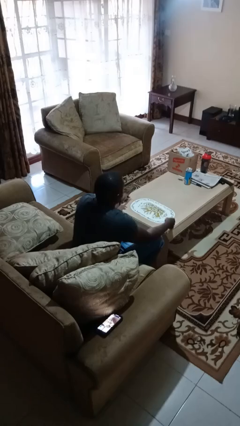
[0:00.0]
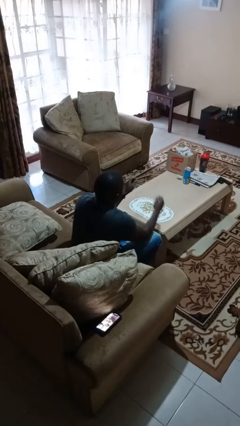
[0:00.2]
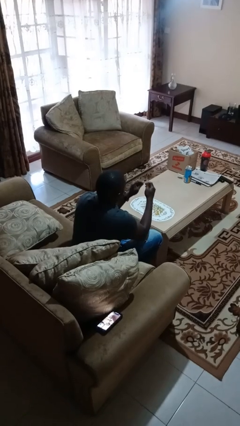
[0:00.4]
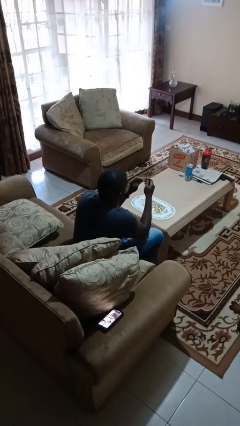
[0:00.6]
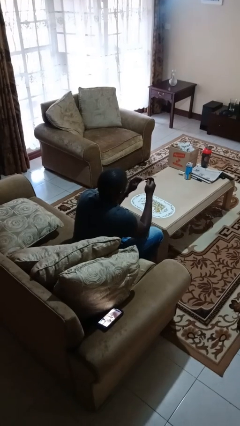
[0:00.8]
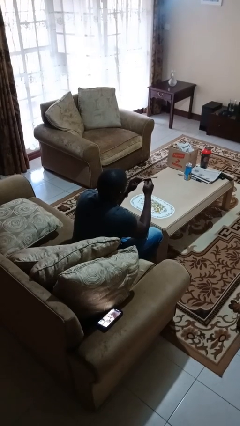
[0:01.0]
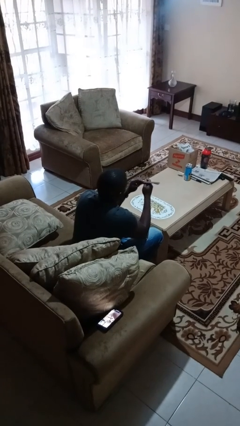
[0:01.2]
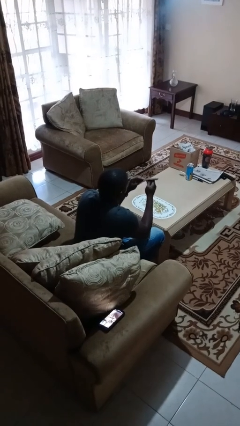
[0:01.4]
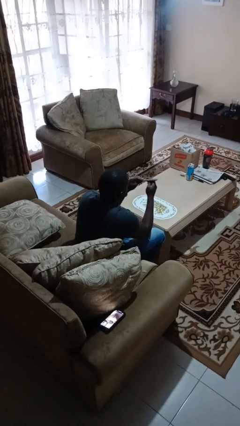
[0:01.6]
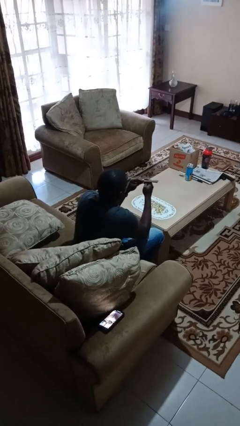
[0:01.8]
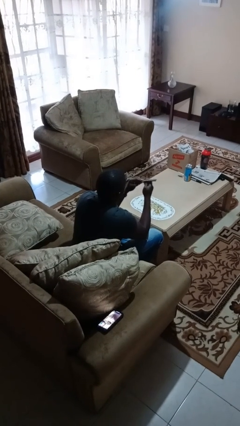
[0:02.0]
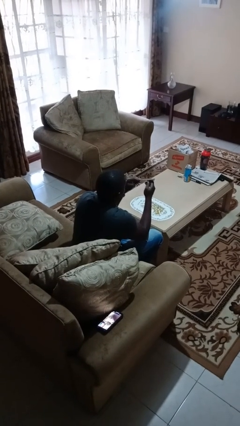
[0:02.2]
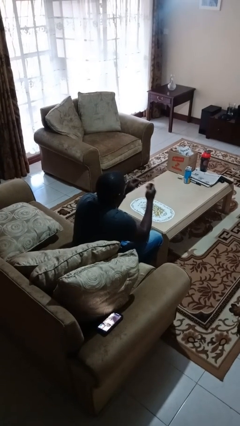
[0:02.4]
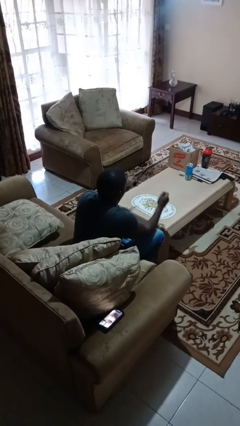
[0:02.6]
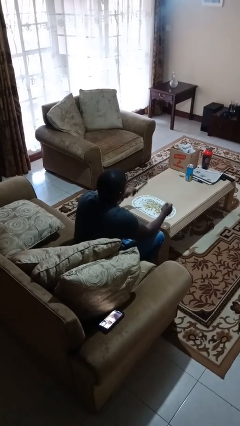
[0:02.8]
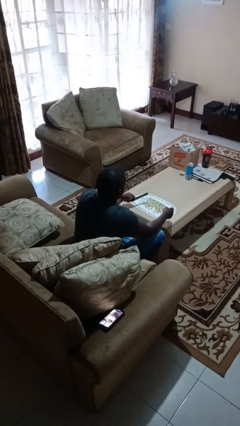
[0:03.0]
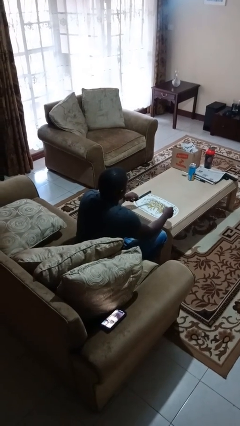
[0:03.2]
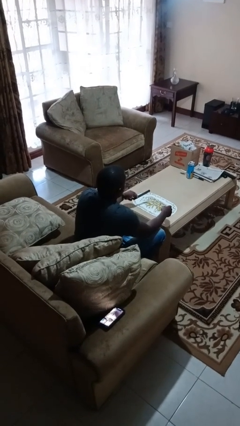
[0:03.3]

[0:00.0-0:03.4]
person files fingernails

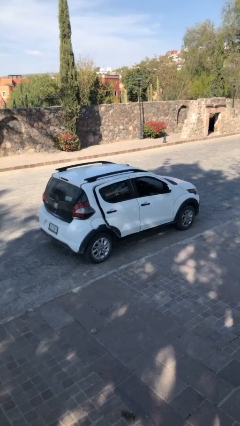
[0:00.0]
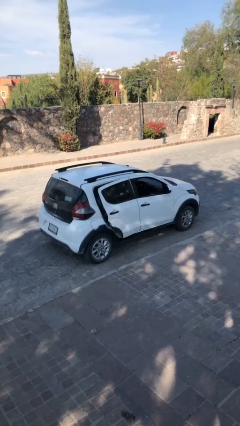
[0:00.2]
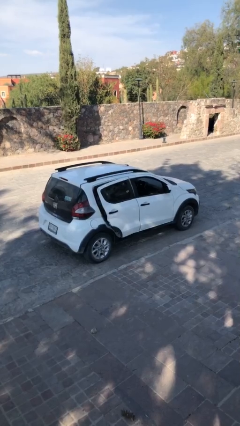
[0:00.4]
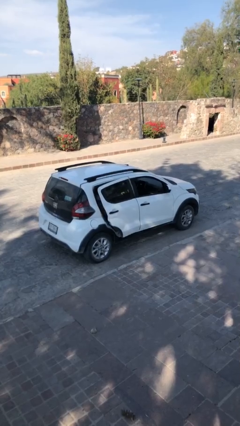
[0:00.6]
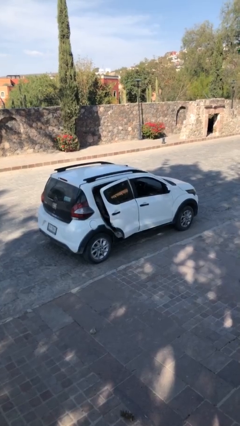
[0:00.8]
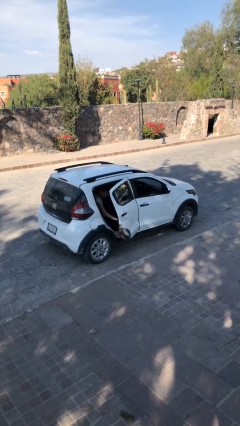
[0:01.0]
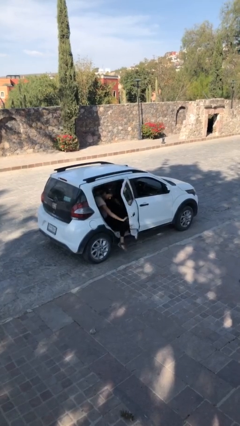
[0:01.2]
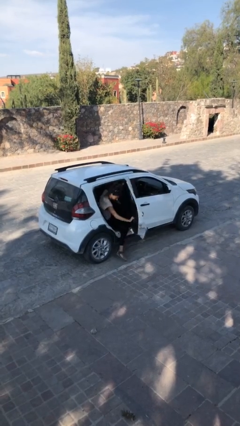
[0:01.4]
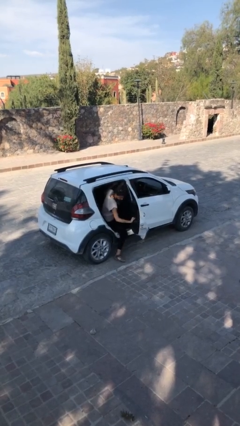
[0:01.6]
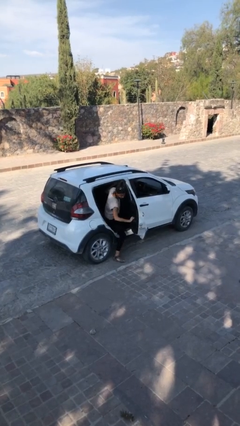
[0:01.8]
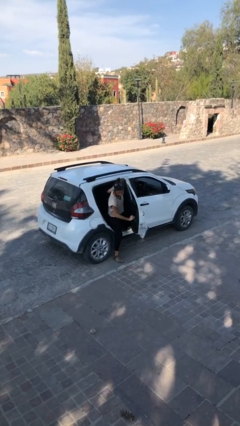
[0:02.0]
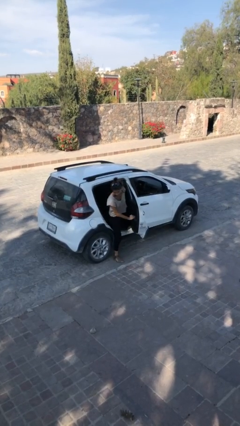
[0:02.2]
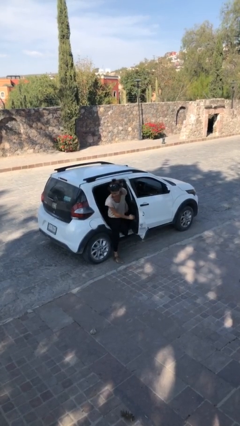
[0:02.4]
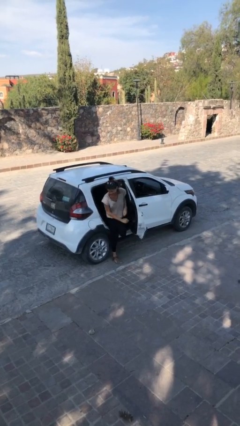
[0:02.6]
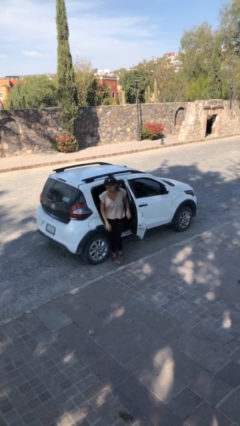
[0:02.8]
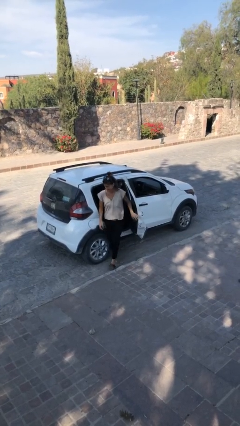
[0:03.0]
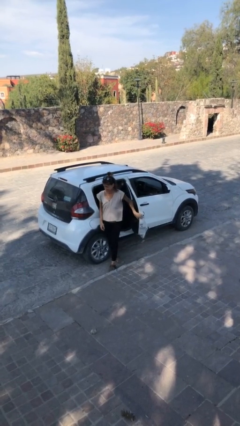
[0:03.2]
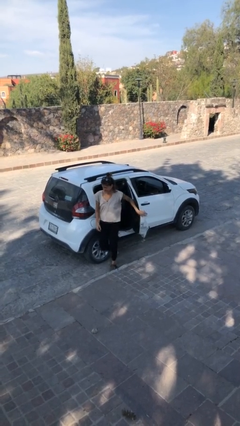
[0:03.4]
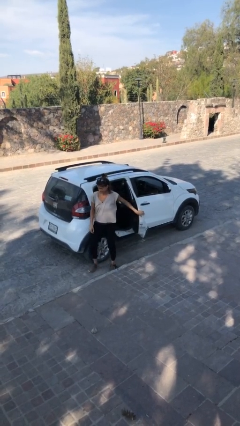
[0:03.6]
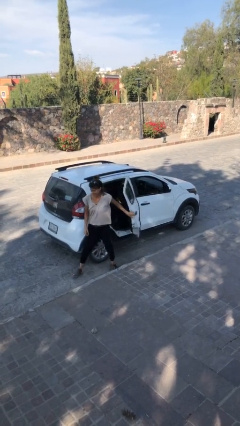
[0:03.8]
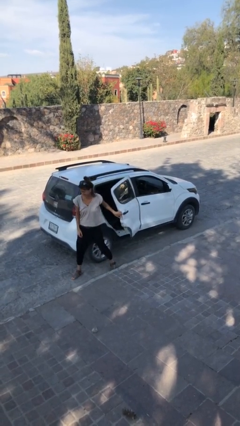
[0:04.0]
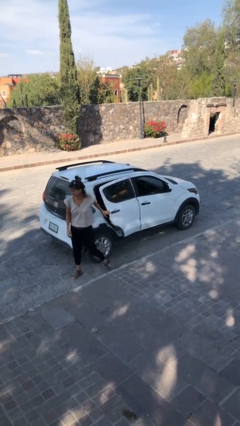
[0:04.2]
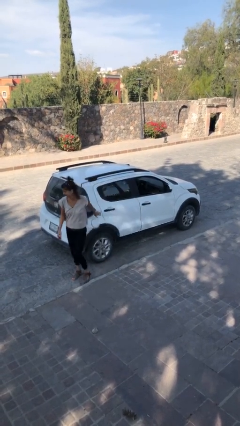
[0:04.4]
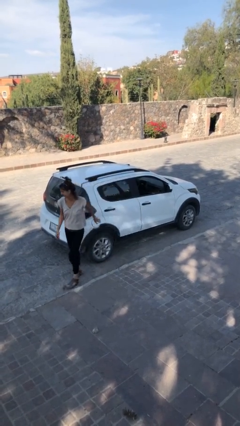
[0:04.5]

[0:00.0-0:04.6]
car drops off person

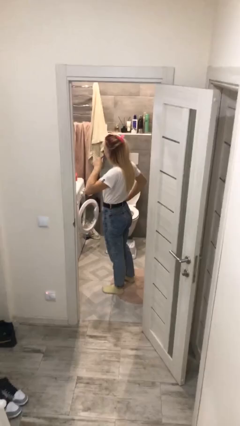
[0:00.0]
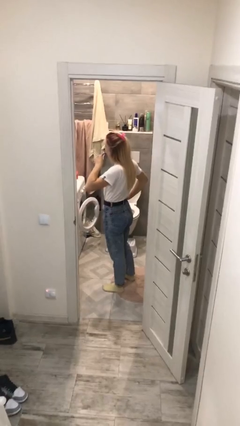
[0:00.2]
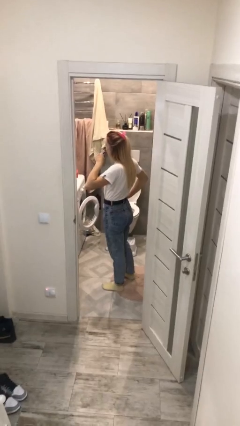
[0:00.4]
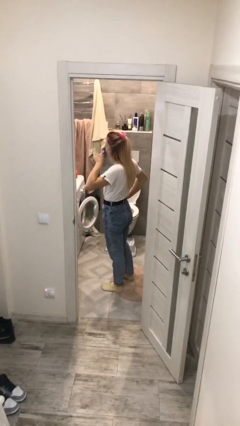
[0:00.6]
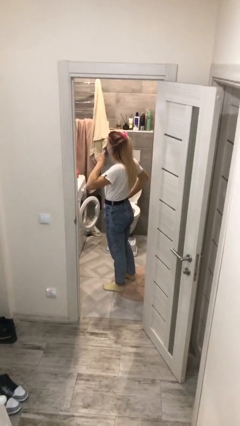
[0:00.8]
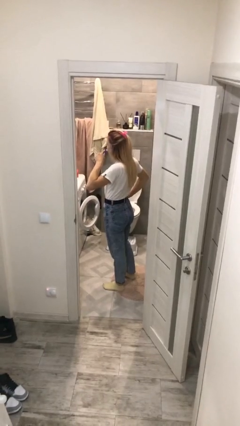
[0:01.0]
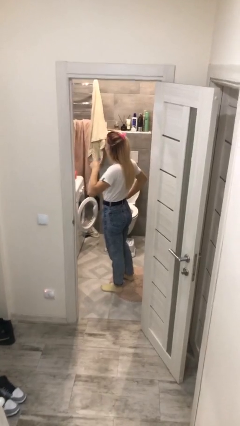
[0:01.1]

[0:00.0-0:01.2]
person brushes teeth

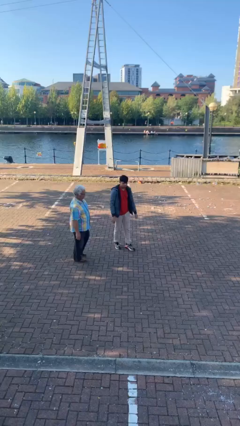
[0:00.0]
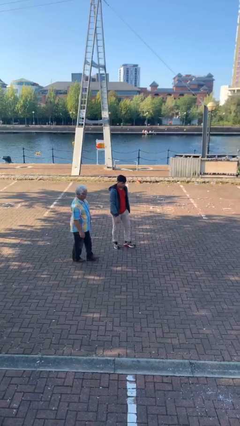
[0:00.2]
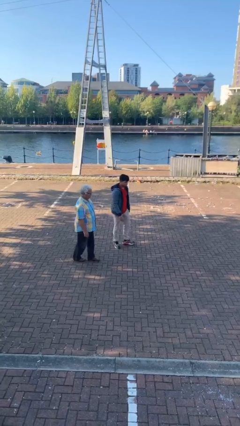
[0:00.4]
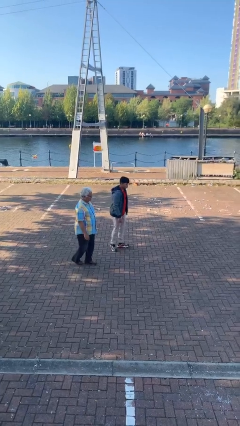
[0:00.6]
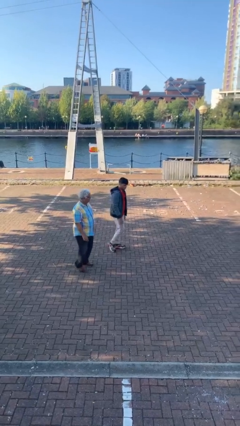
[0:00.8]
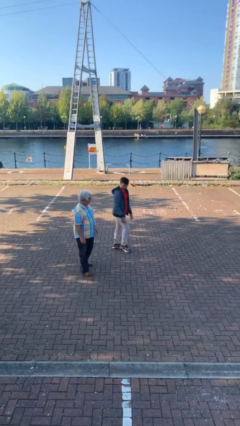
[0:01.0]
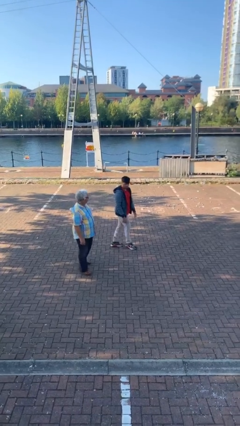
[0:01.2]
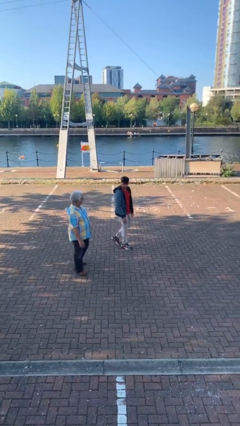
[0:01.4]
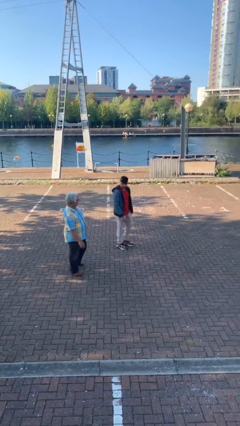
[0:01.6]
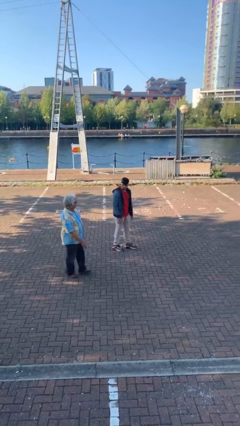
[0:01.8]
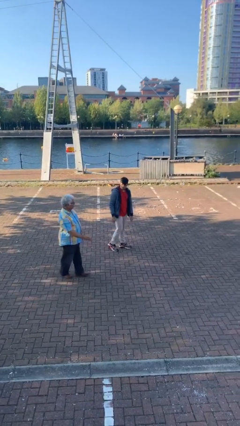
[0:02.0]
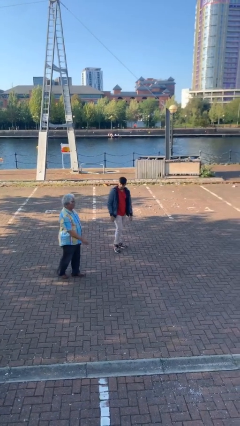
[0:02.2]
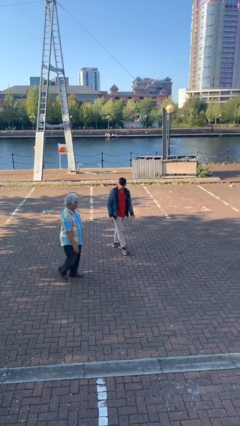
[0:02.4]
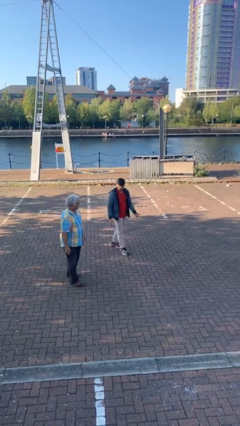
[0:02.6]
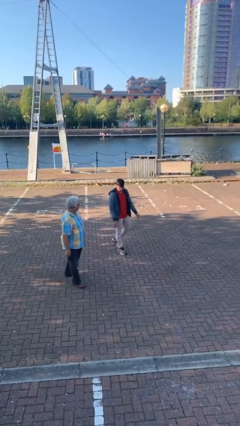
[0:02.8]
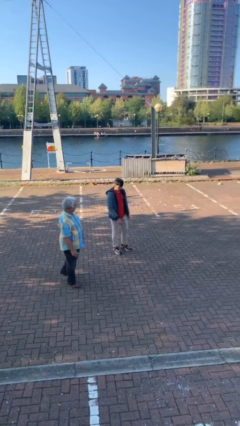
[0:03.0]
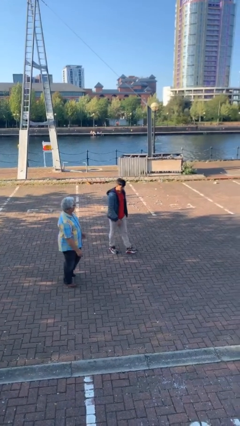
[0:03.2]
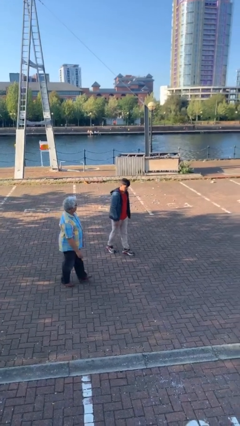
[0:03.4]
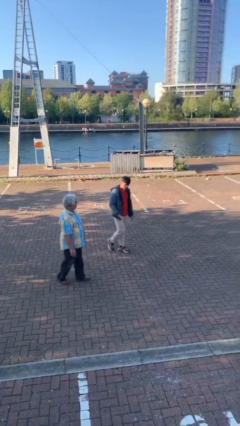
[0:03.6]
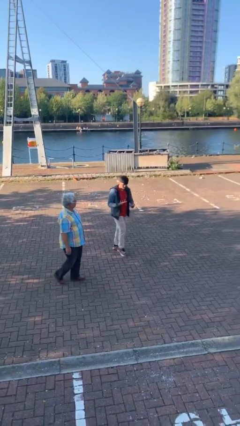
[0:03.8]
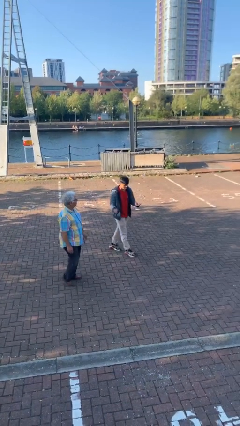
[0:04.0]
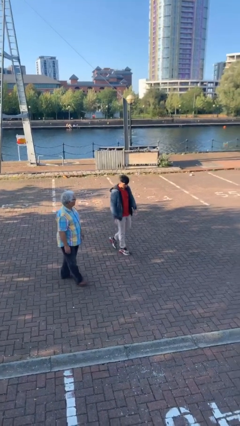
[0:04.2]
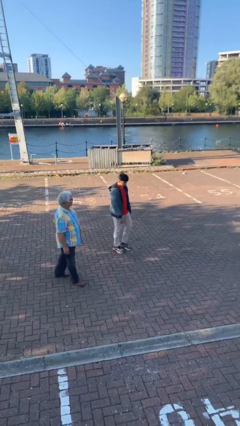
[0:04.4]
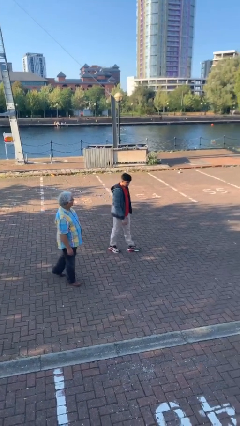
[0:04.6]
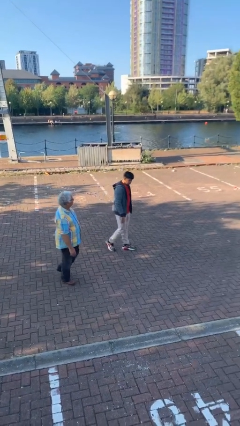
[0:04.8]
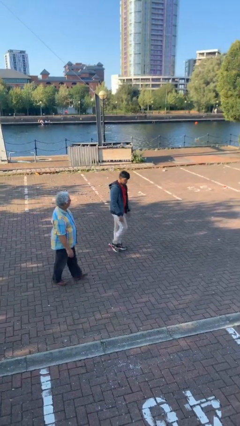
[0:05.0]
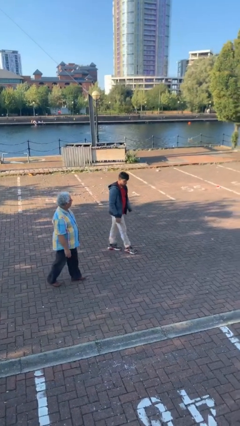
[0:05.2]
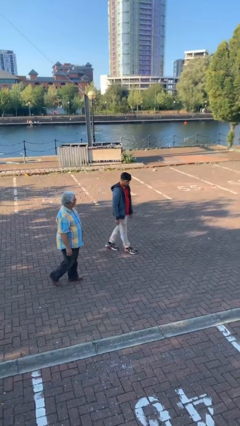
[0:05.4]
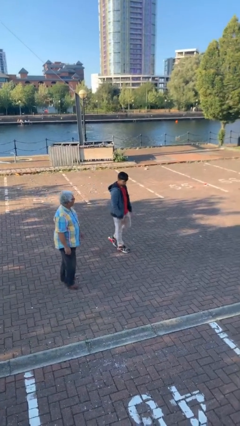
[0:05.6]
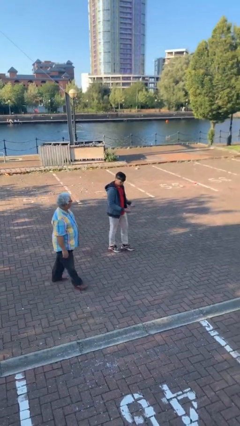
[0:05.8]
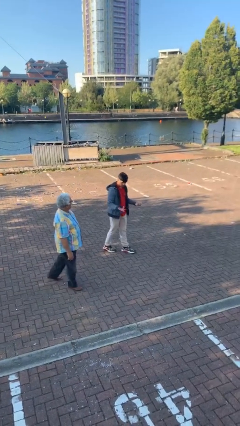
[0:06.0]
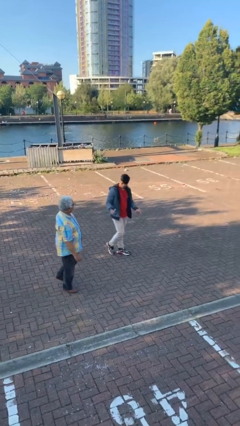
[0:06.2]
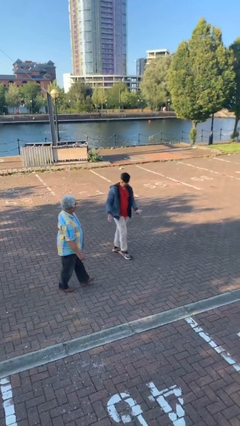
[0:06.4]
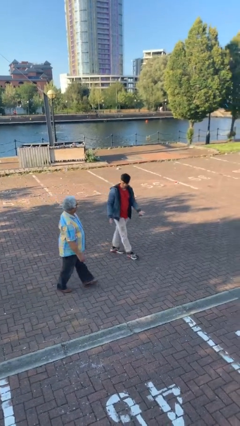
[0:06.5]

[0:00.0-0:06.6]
person talks to person

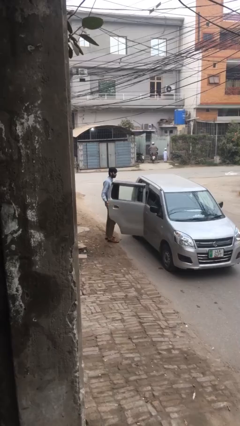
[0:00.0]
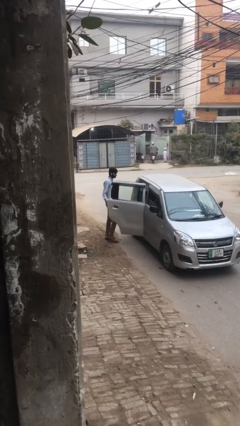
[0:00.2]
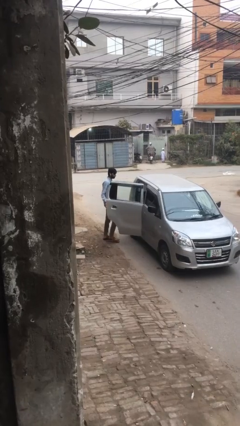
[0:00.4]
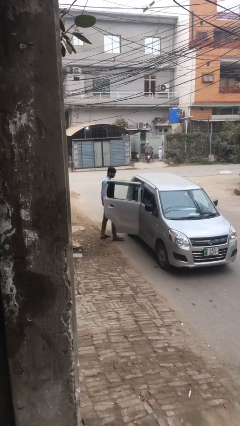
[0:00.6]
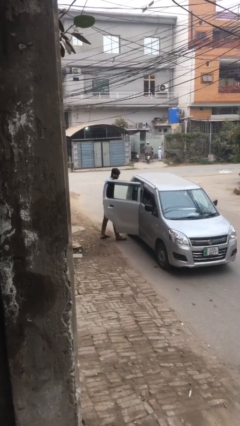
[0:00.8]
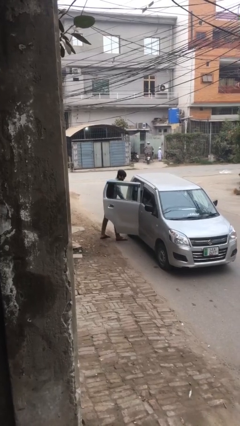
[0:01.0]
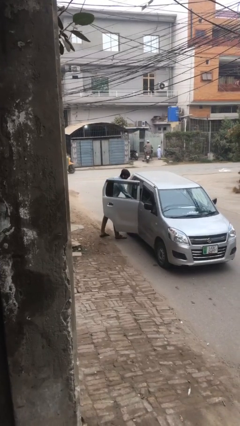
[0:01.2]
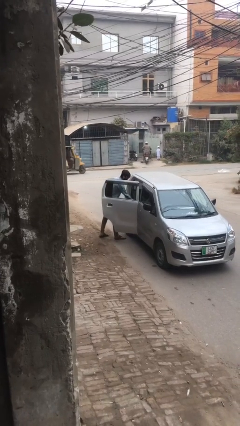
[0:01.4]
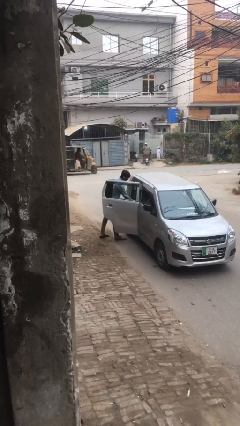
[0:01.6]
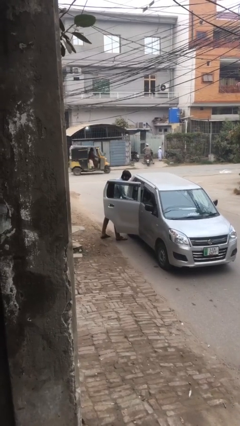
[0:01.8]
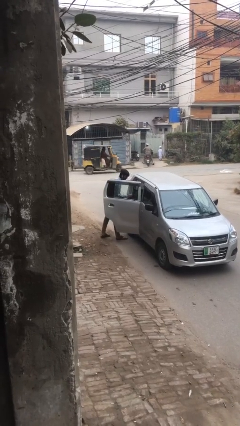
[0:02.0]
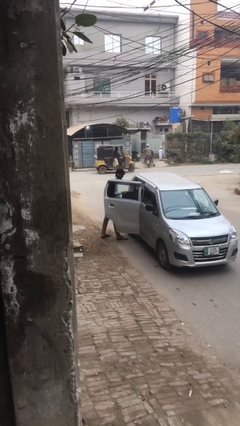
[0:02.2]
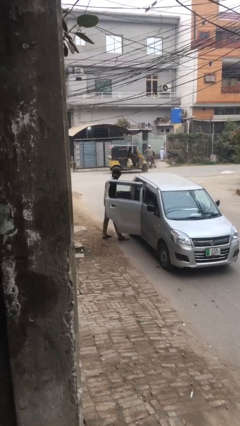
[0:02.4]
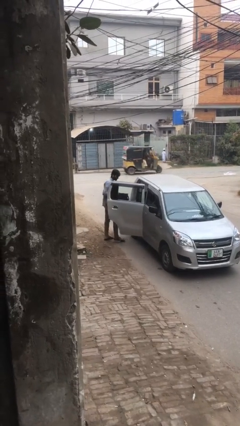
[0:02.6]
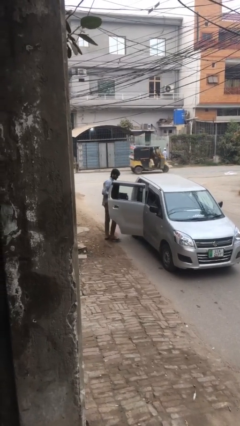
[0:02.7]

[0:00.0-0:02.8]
person unloads car
